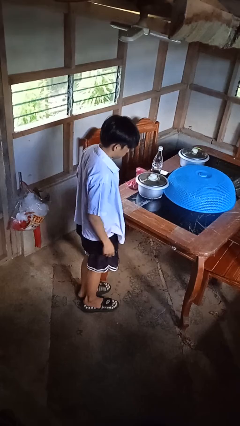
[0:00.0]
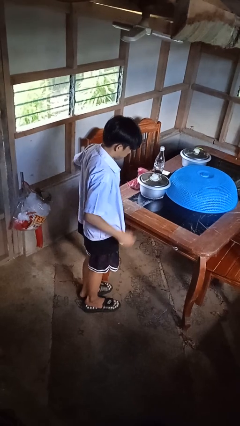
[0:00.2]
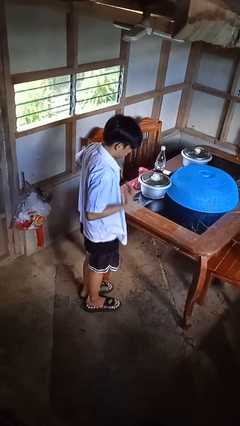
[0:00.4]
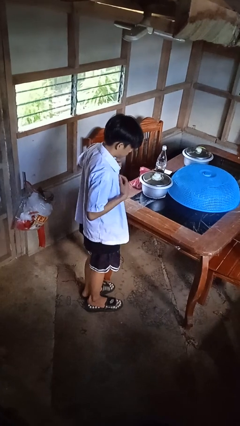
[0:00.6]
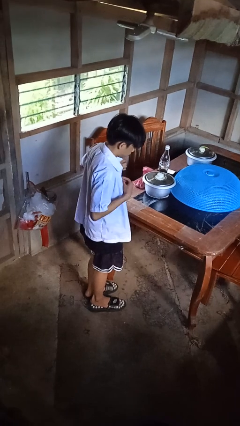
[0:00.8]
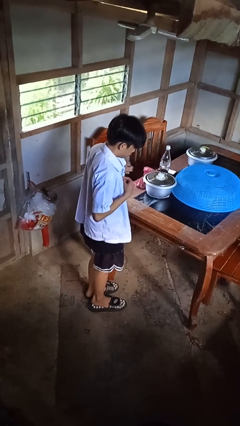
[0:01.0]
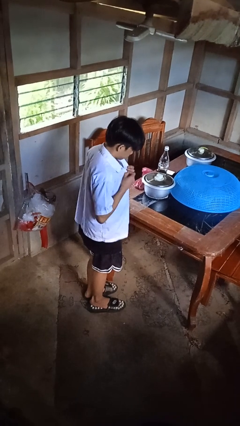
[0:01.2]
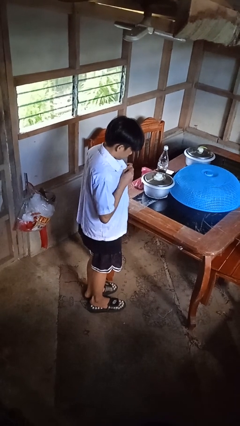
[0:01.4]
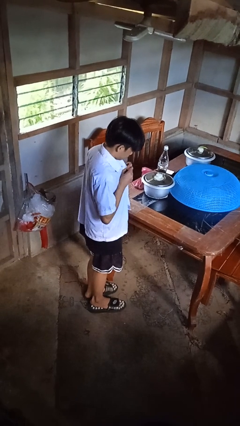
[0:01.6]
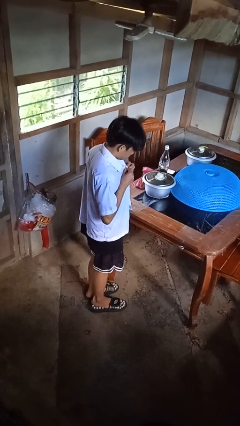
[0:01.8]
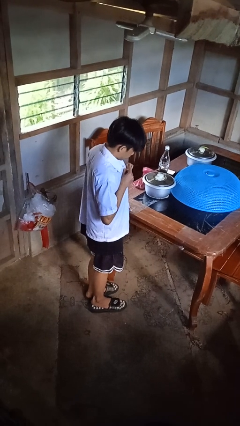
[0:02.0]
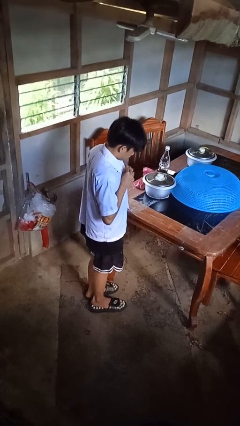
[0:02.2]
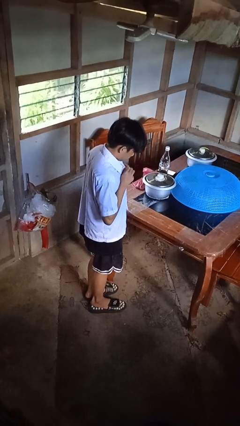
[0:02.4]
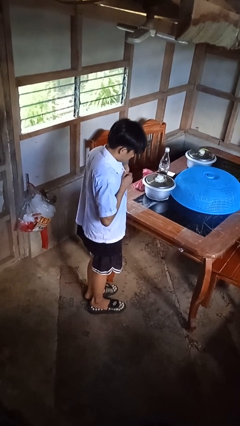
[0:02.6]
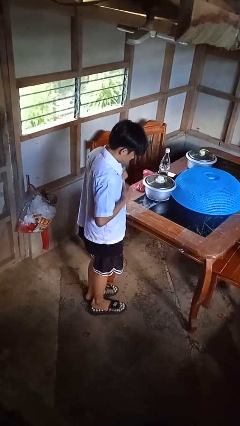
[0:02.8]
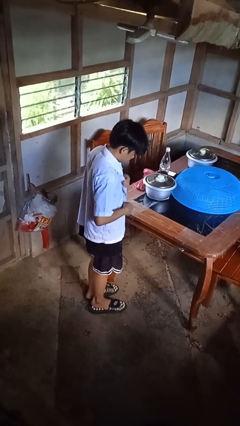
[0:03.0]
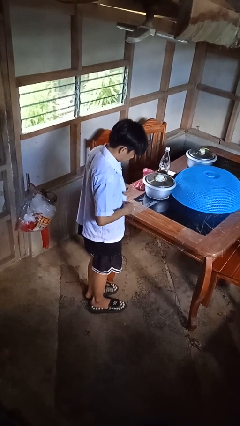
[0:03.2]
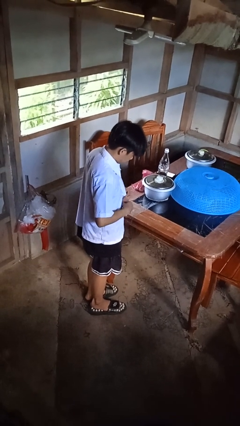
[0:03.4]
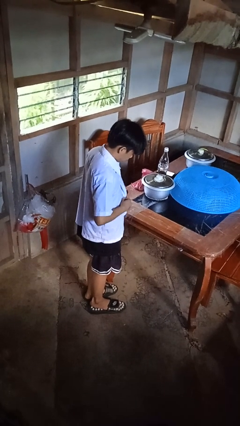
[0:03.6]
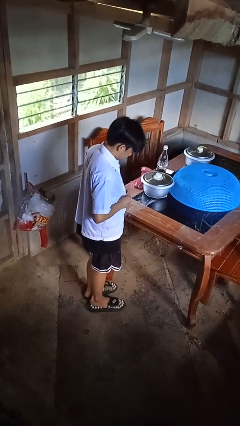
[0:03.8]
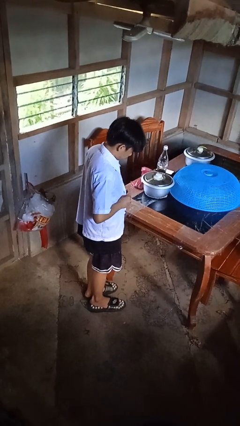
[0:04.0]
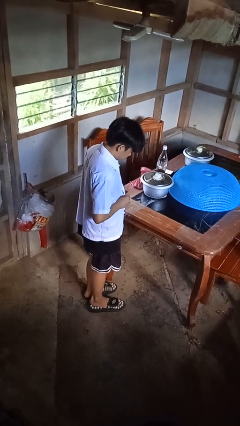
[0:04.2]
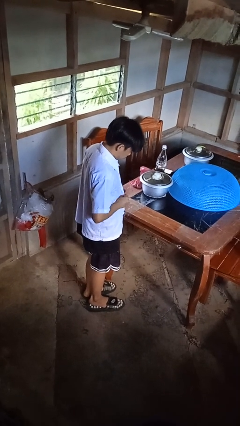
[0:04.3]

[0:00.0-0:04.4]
person buttons shirt

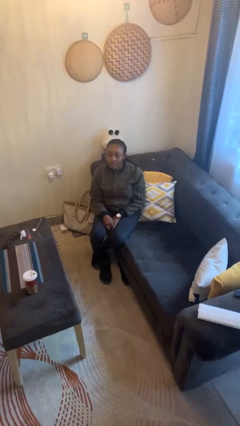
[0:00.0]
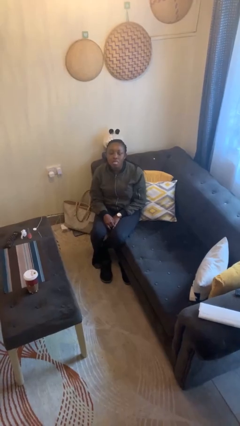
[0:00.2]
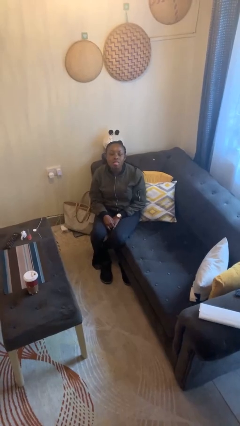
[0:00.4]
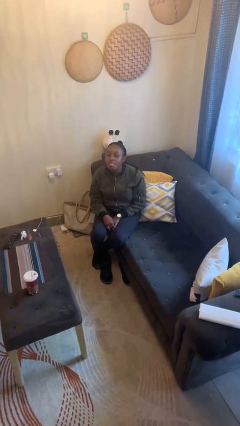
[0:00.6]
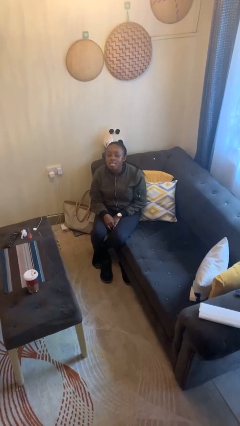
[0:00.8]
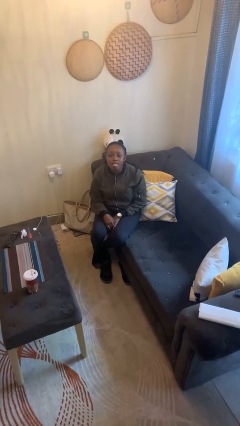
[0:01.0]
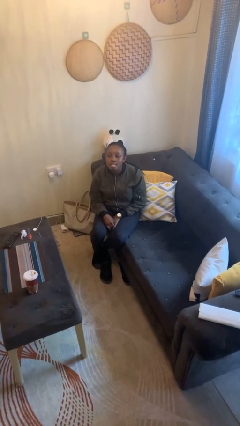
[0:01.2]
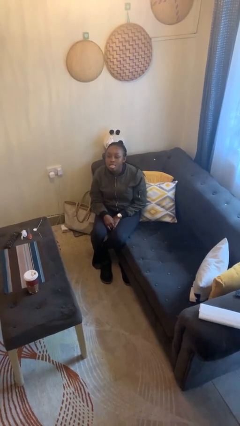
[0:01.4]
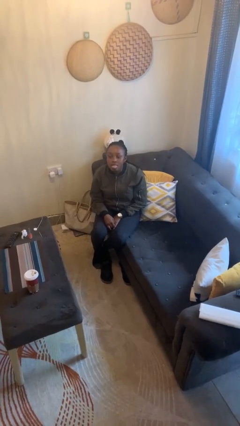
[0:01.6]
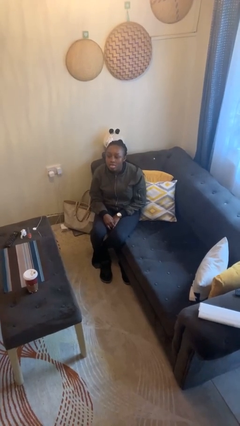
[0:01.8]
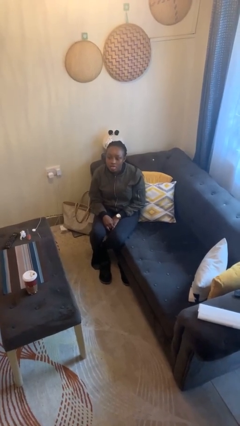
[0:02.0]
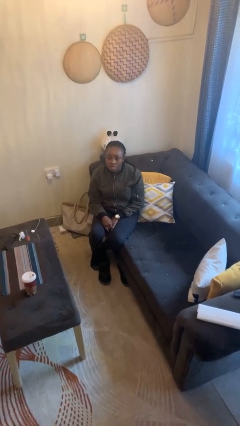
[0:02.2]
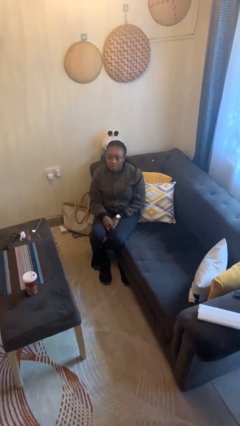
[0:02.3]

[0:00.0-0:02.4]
person sticks out tongue

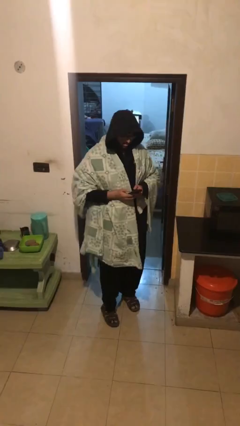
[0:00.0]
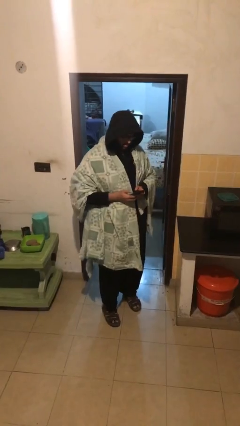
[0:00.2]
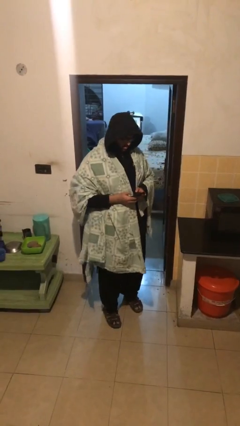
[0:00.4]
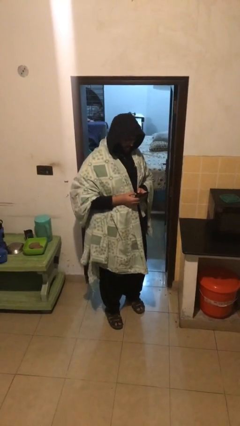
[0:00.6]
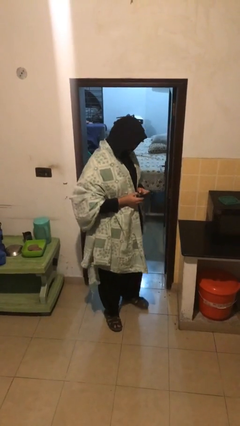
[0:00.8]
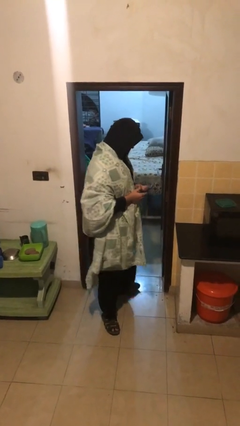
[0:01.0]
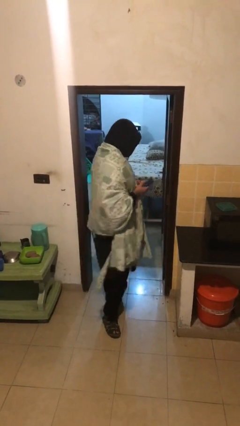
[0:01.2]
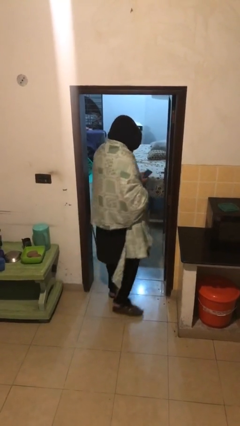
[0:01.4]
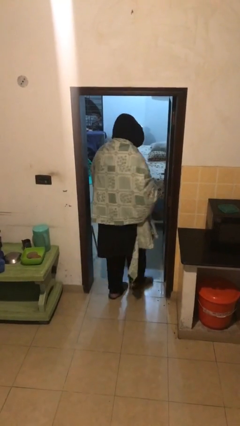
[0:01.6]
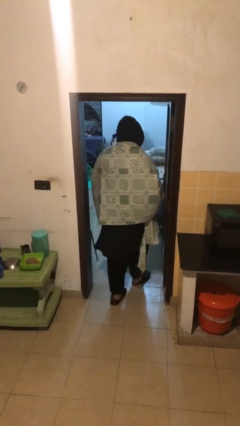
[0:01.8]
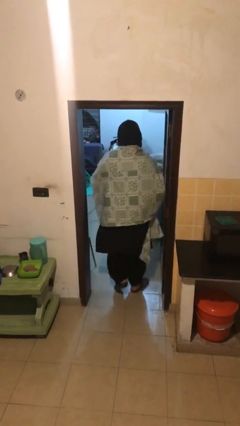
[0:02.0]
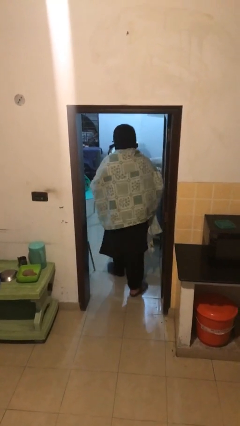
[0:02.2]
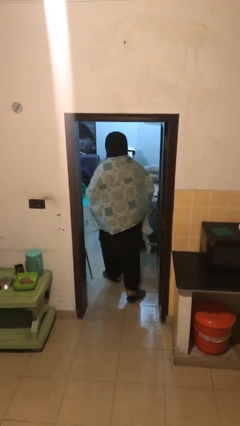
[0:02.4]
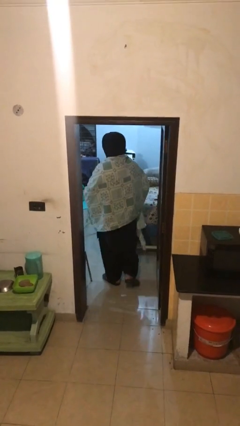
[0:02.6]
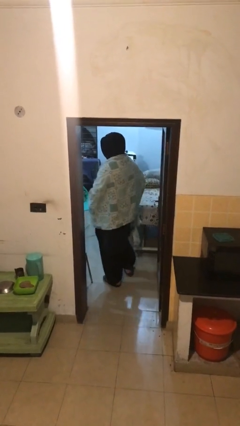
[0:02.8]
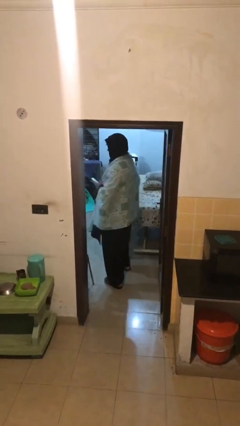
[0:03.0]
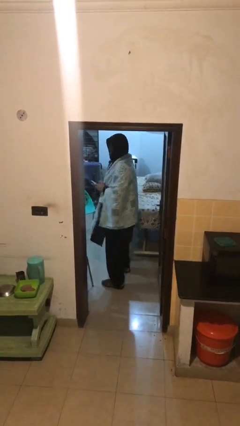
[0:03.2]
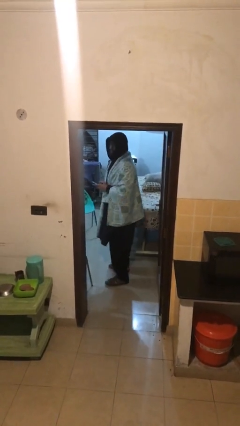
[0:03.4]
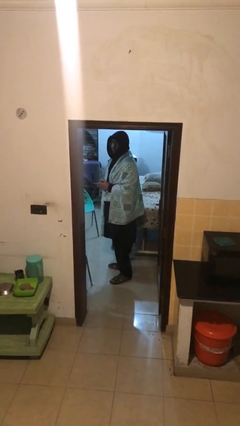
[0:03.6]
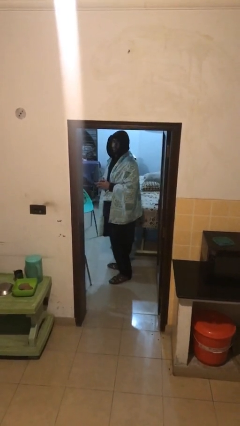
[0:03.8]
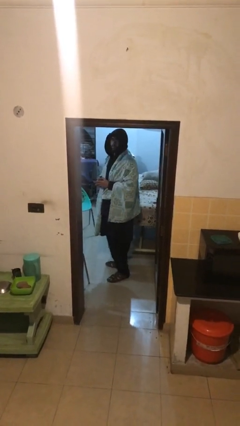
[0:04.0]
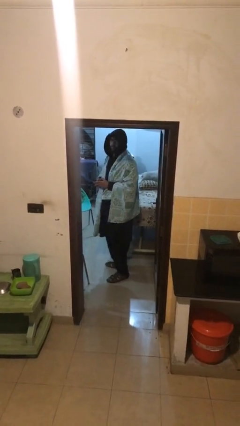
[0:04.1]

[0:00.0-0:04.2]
person exits scene through structure

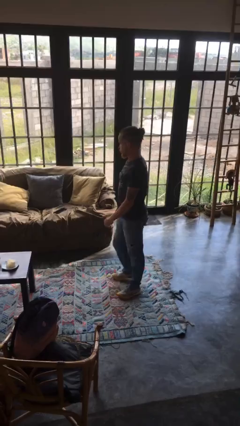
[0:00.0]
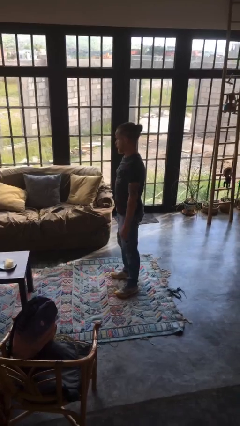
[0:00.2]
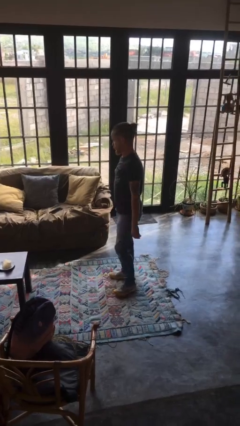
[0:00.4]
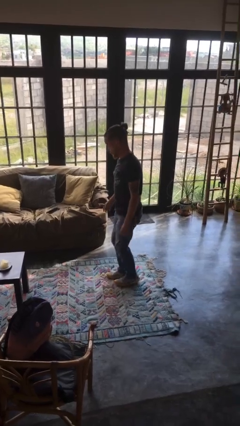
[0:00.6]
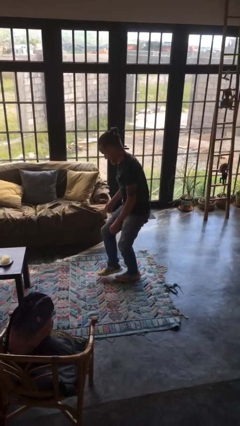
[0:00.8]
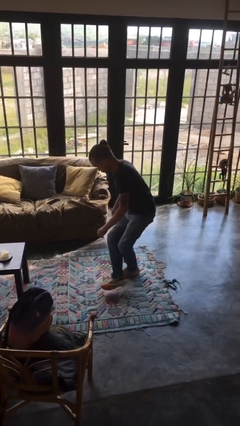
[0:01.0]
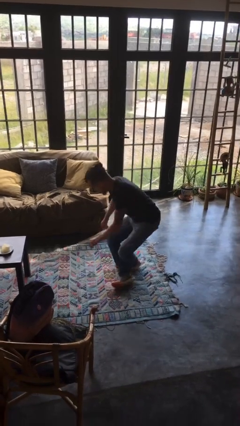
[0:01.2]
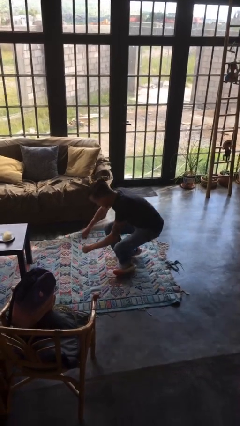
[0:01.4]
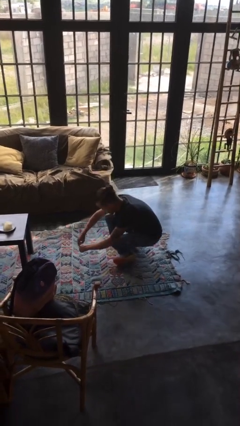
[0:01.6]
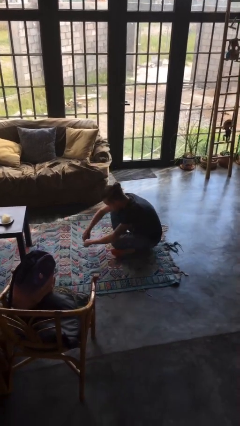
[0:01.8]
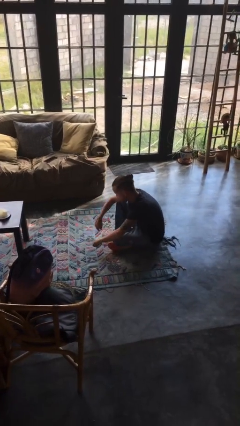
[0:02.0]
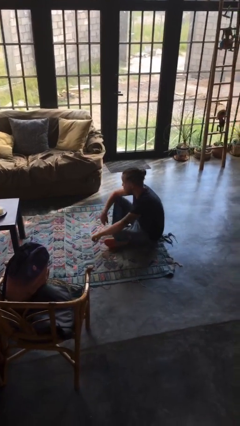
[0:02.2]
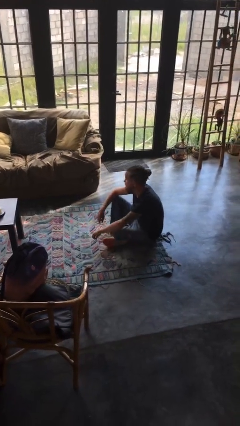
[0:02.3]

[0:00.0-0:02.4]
person sits crisscross

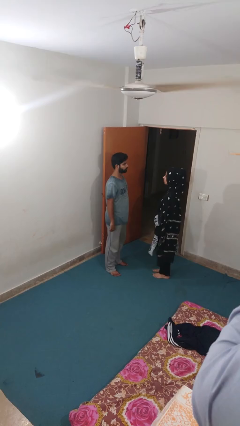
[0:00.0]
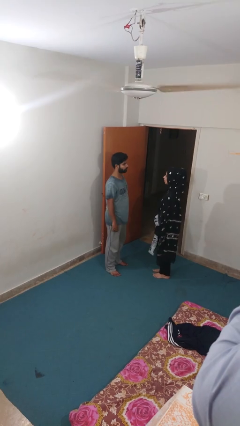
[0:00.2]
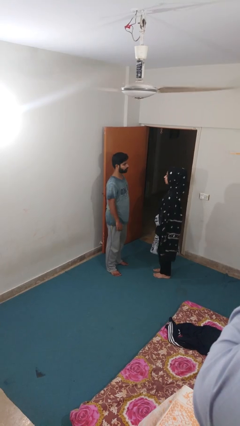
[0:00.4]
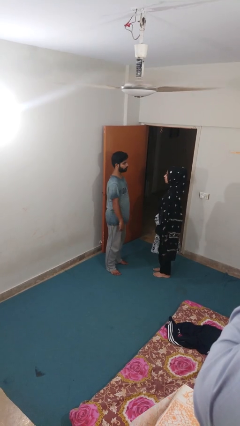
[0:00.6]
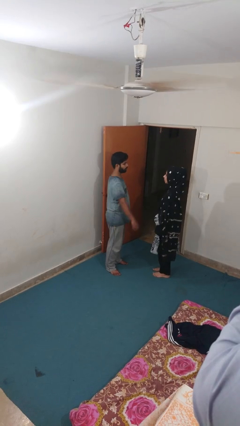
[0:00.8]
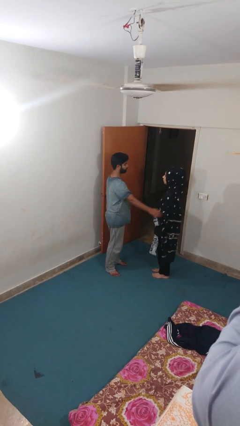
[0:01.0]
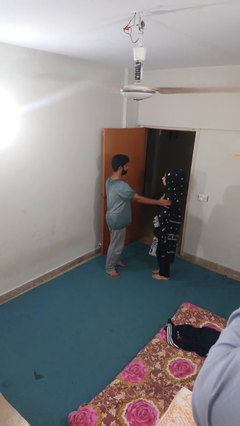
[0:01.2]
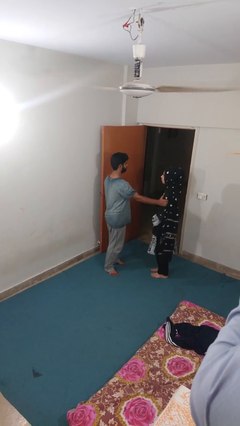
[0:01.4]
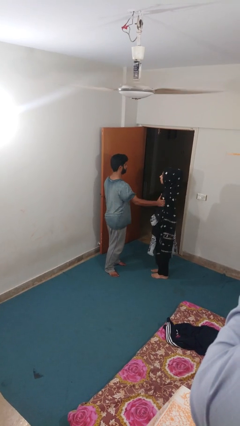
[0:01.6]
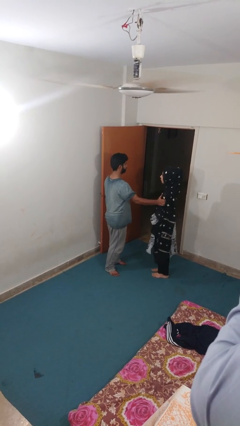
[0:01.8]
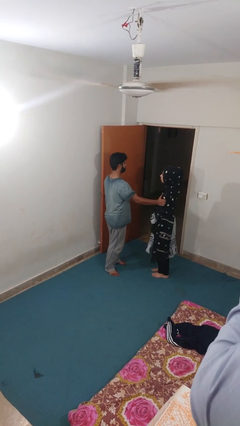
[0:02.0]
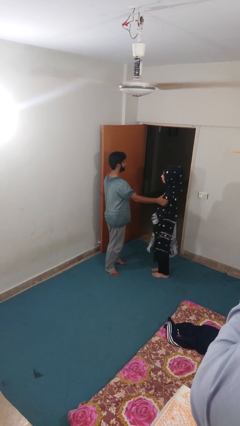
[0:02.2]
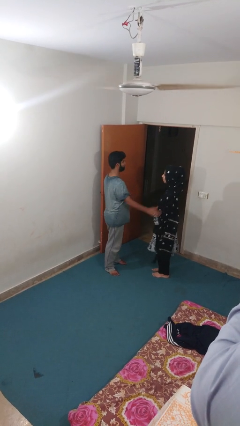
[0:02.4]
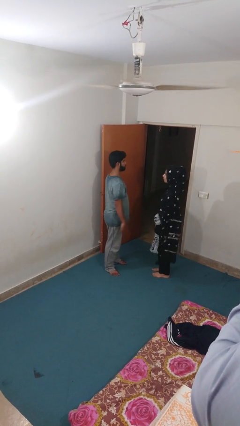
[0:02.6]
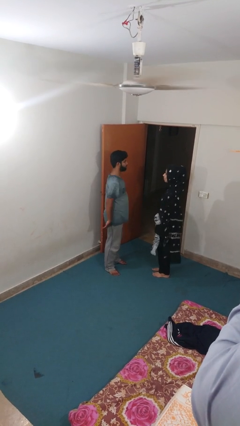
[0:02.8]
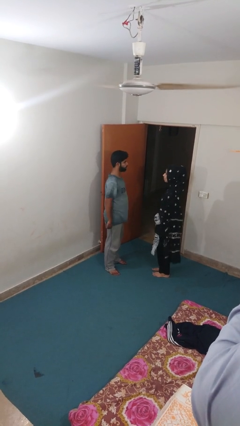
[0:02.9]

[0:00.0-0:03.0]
person grabs person by bicep

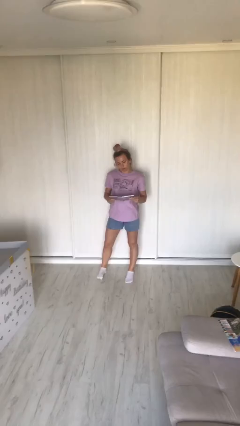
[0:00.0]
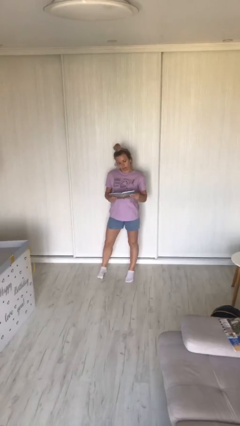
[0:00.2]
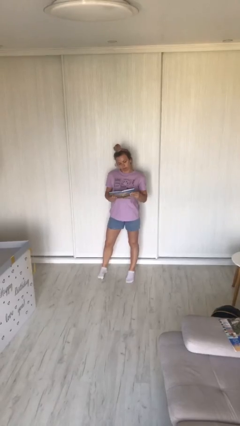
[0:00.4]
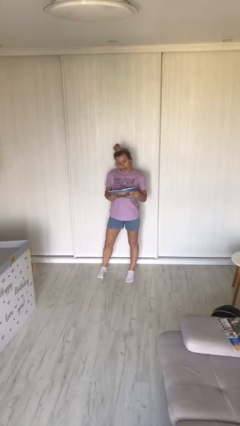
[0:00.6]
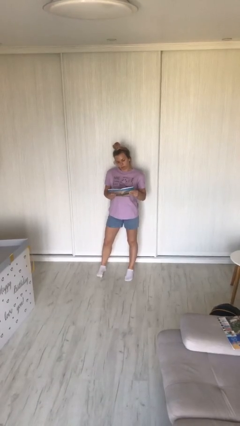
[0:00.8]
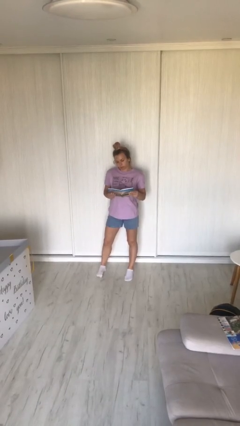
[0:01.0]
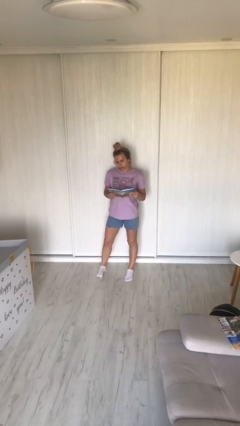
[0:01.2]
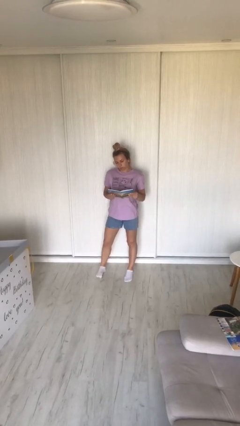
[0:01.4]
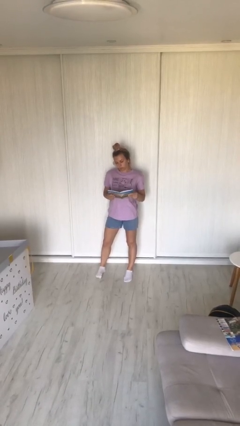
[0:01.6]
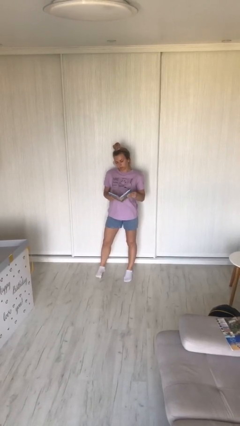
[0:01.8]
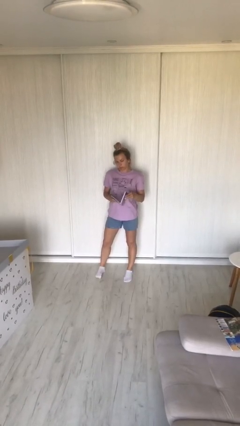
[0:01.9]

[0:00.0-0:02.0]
person reads book
